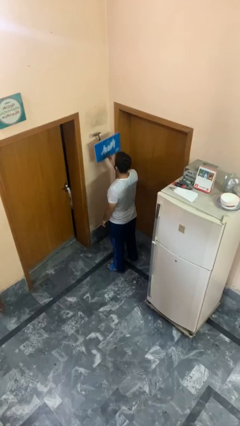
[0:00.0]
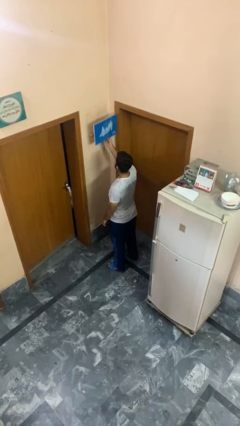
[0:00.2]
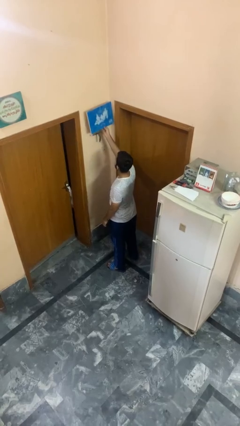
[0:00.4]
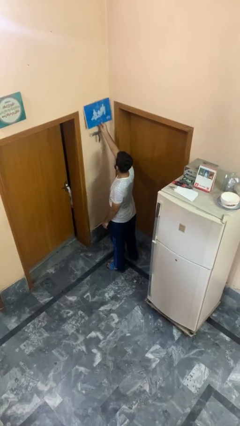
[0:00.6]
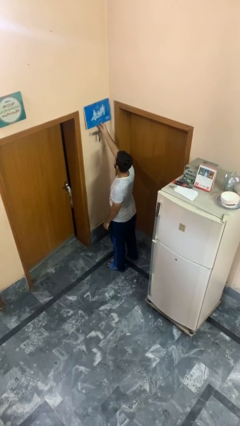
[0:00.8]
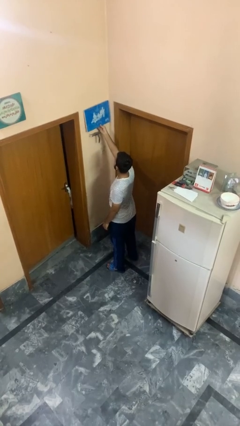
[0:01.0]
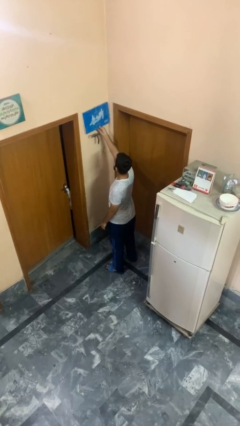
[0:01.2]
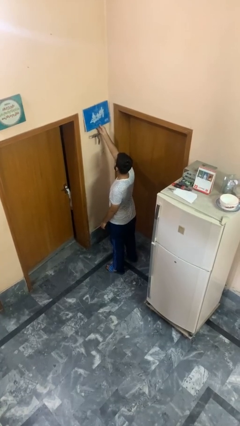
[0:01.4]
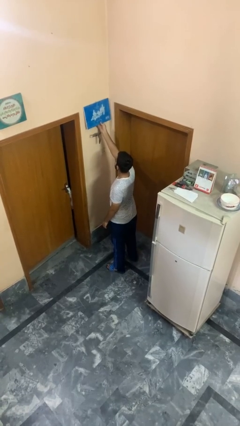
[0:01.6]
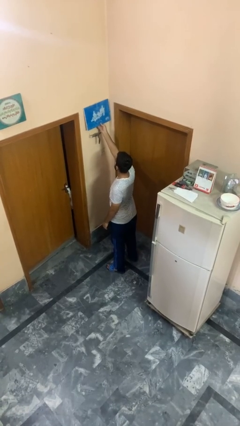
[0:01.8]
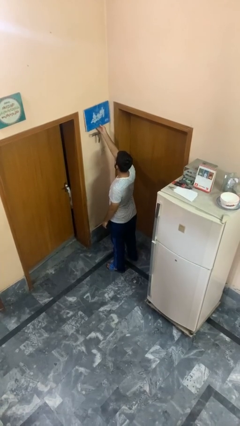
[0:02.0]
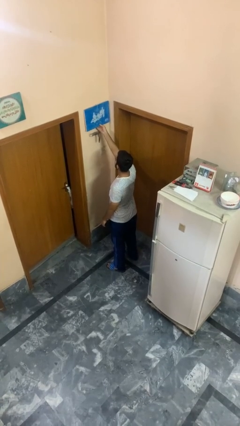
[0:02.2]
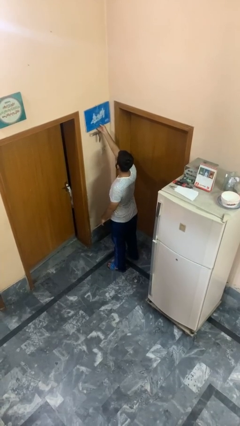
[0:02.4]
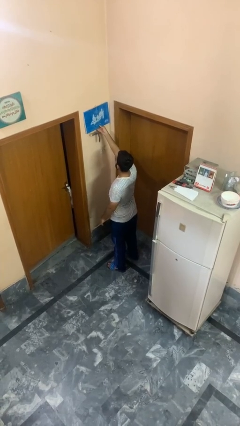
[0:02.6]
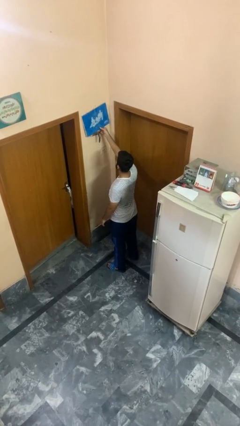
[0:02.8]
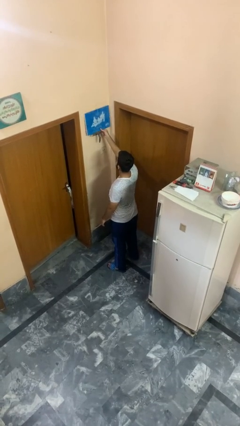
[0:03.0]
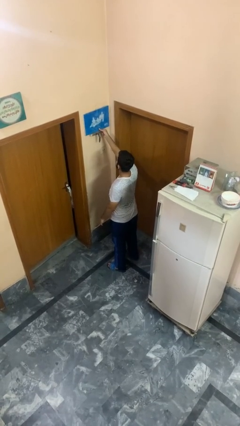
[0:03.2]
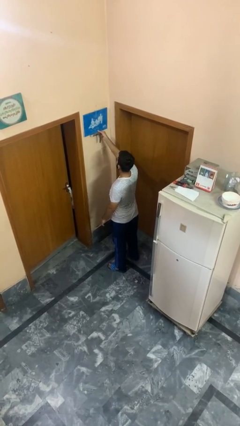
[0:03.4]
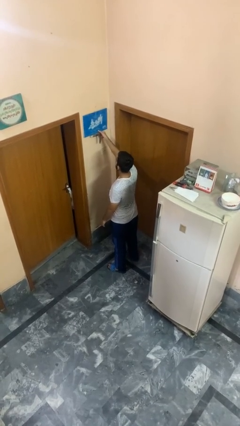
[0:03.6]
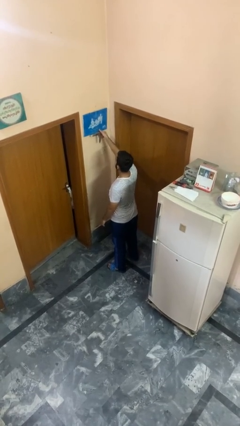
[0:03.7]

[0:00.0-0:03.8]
person puts up picture frame

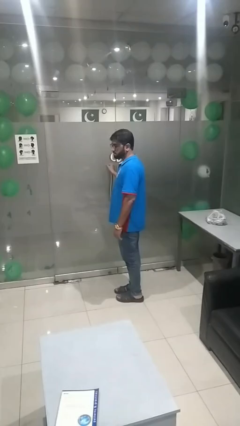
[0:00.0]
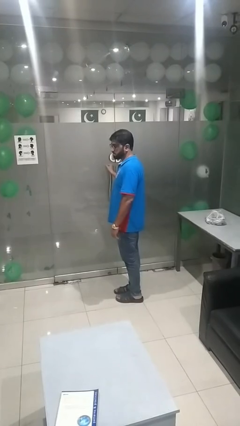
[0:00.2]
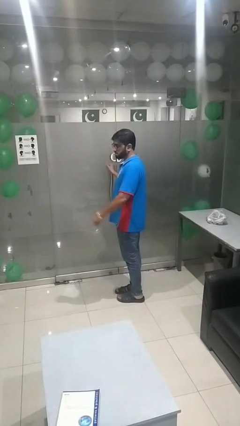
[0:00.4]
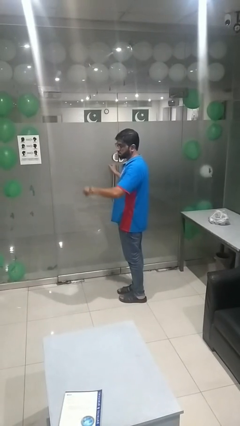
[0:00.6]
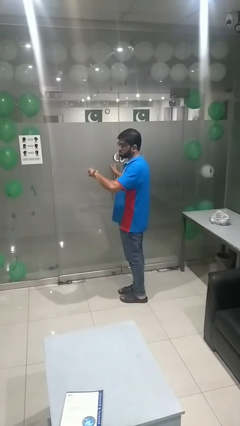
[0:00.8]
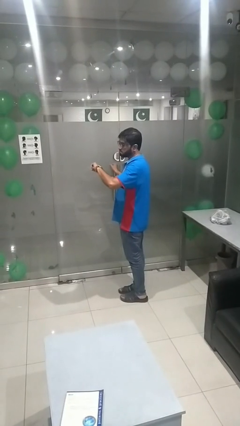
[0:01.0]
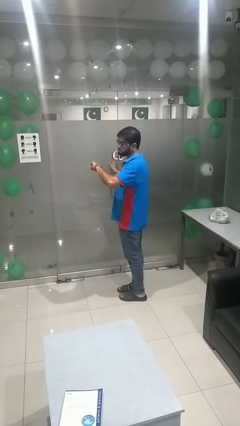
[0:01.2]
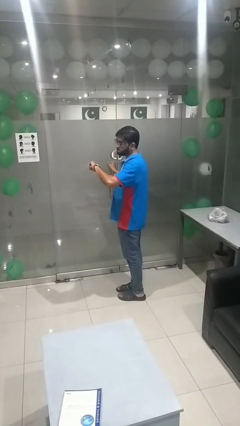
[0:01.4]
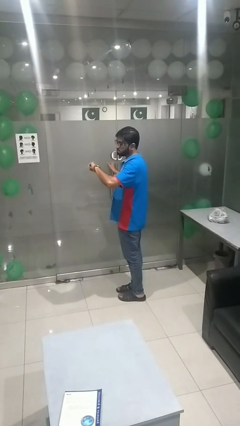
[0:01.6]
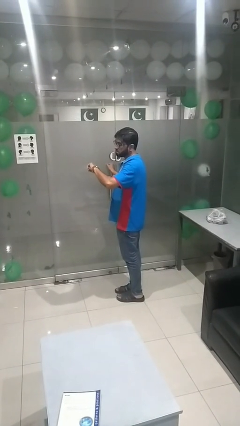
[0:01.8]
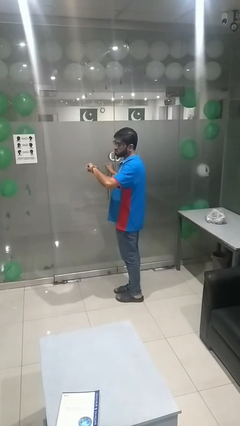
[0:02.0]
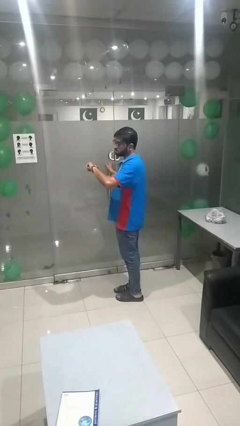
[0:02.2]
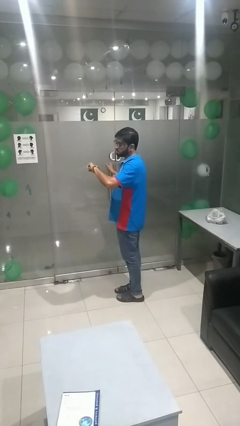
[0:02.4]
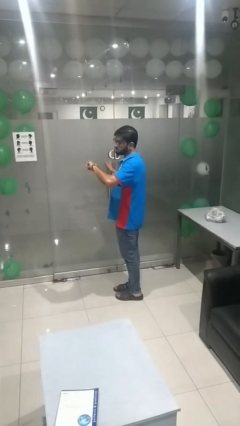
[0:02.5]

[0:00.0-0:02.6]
person looks at wristwatch

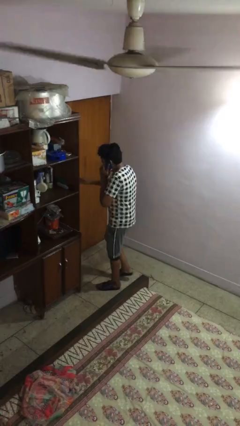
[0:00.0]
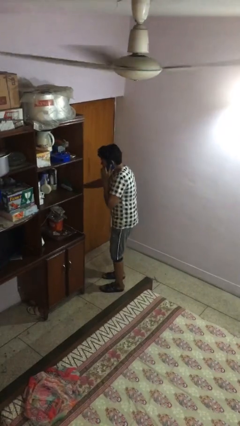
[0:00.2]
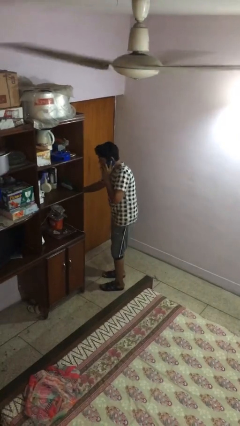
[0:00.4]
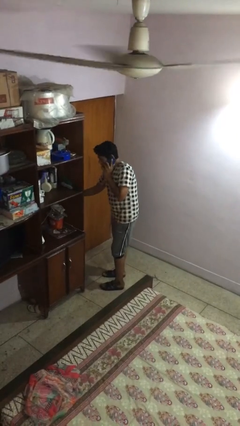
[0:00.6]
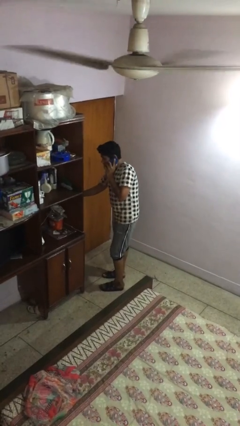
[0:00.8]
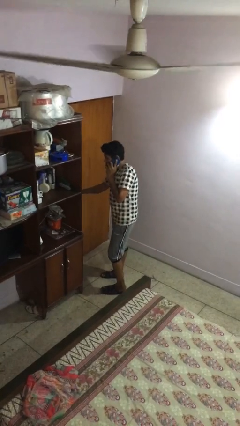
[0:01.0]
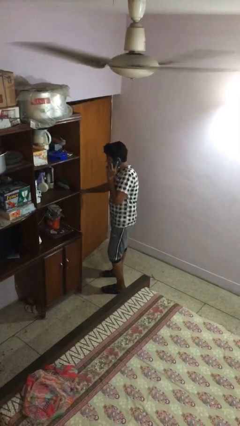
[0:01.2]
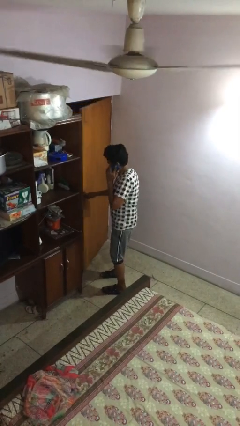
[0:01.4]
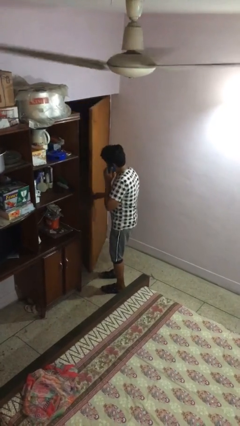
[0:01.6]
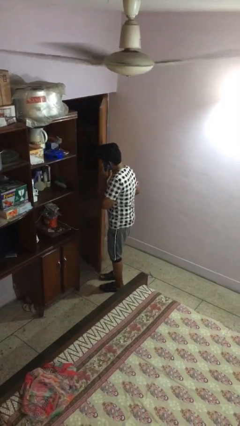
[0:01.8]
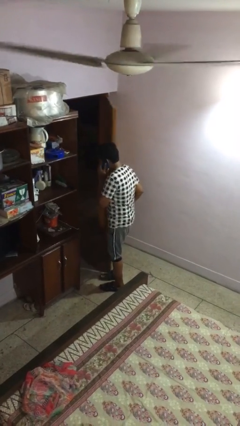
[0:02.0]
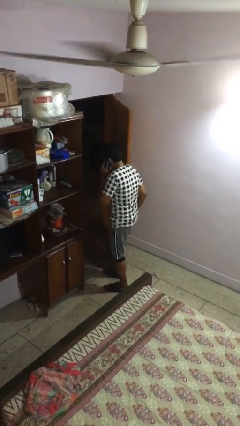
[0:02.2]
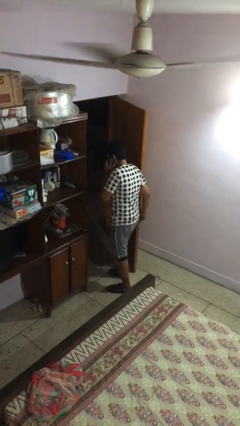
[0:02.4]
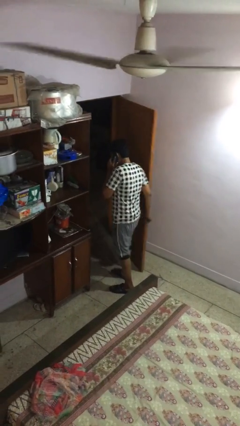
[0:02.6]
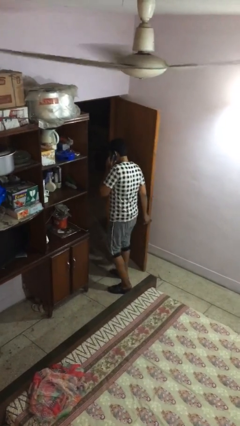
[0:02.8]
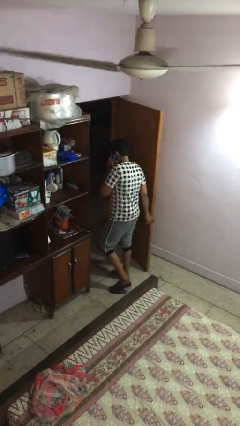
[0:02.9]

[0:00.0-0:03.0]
person opens facility door

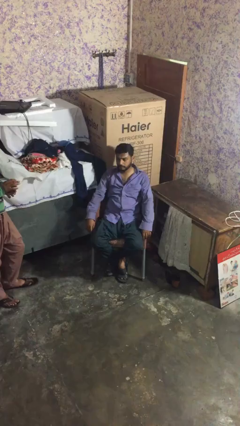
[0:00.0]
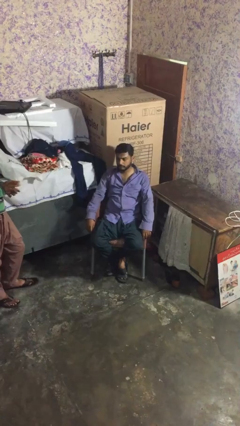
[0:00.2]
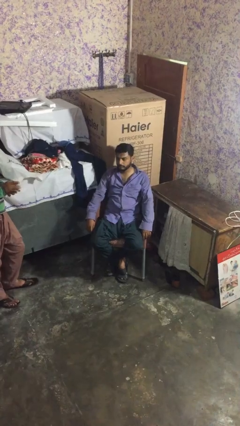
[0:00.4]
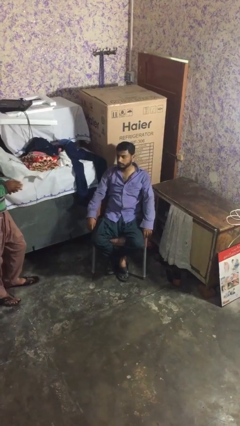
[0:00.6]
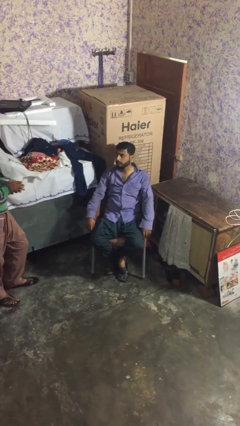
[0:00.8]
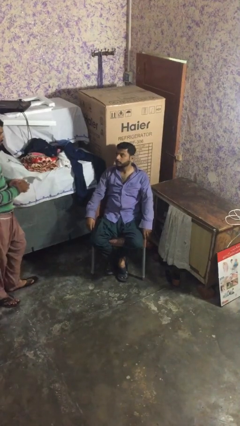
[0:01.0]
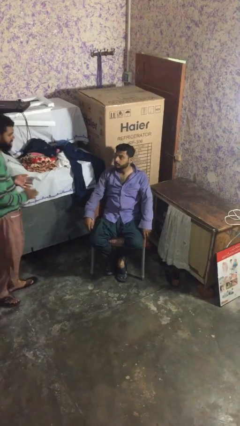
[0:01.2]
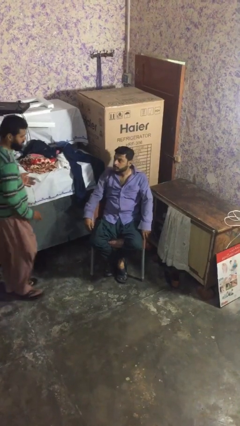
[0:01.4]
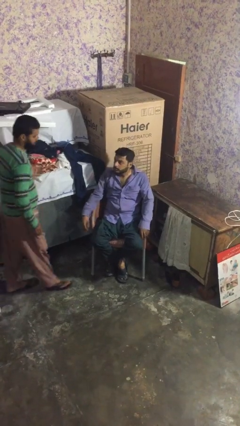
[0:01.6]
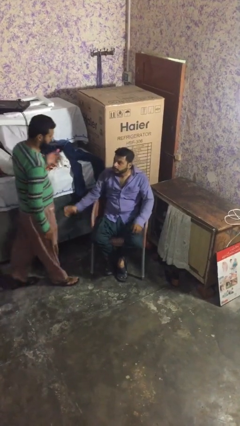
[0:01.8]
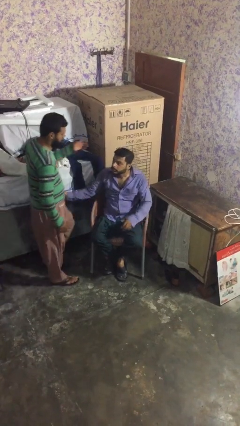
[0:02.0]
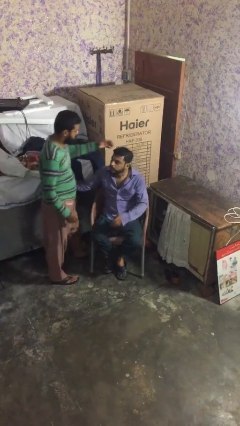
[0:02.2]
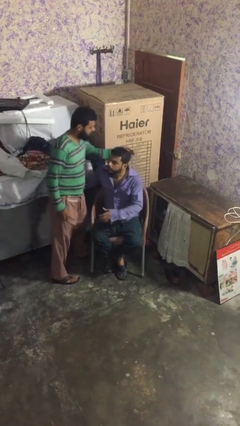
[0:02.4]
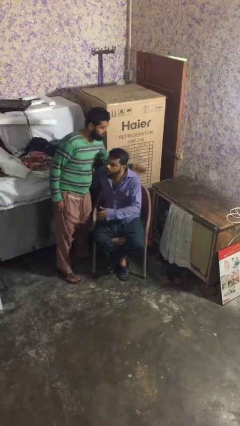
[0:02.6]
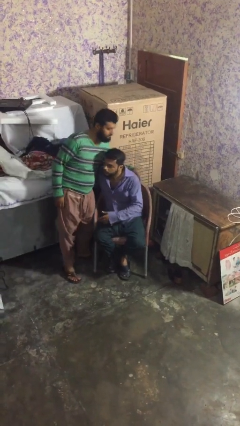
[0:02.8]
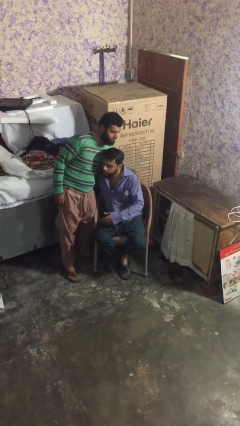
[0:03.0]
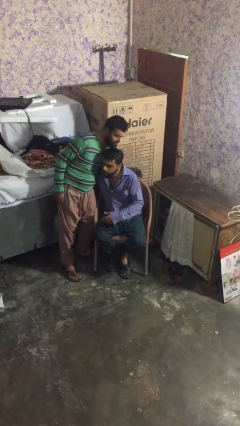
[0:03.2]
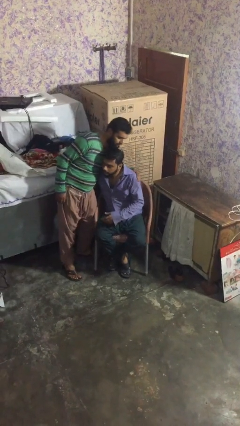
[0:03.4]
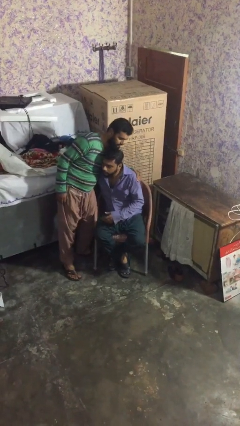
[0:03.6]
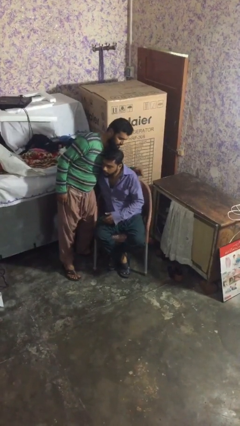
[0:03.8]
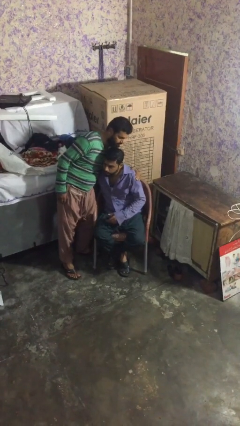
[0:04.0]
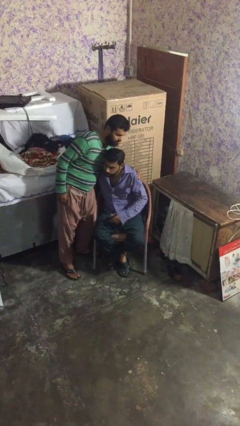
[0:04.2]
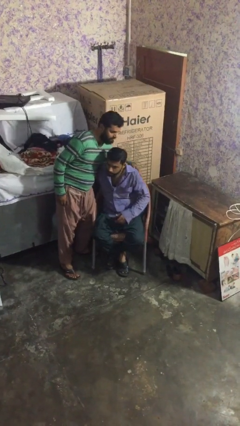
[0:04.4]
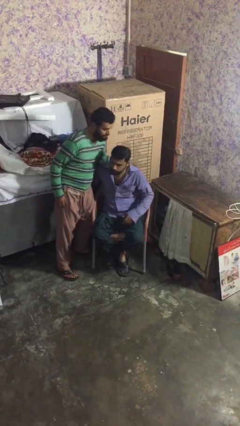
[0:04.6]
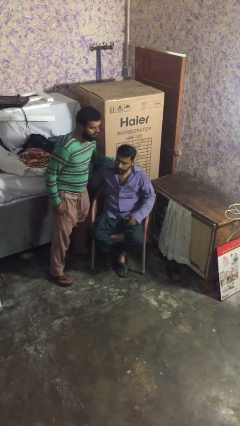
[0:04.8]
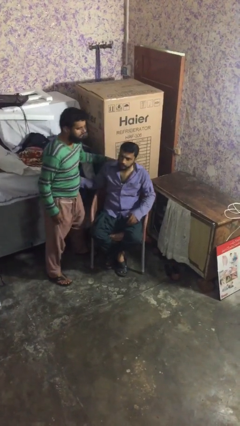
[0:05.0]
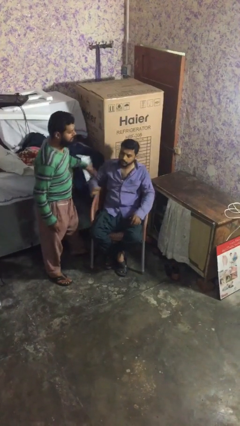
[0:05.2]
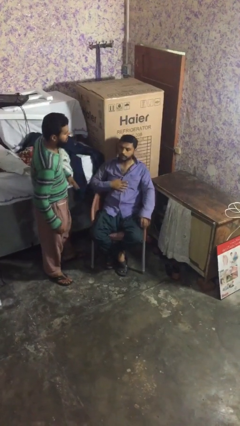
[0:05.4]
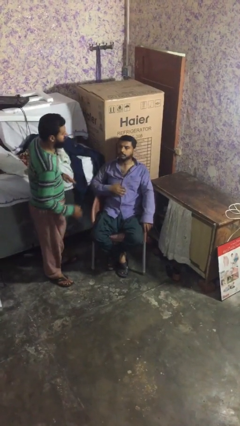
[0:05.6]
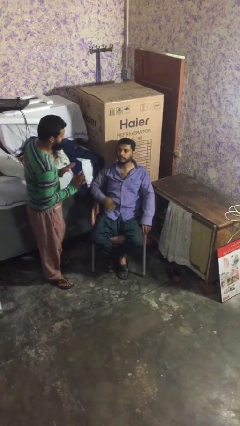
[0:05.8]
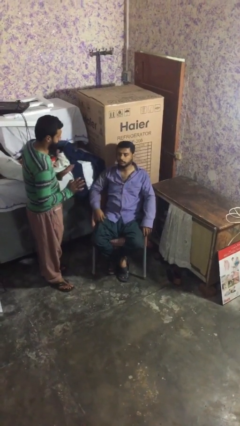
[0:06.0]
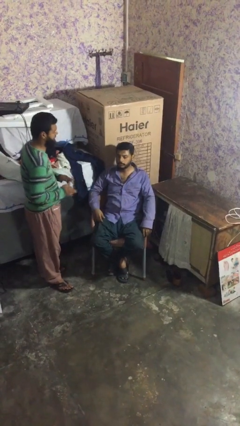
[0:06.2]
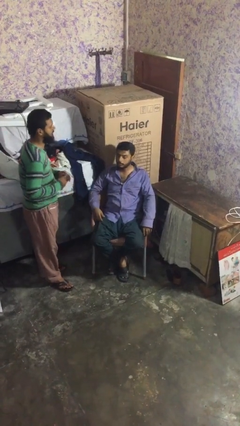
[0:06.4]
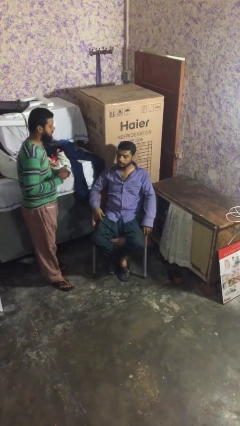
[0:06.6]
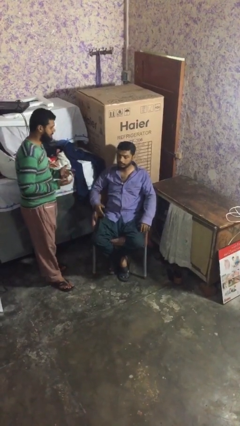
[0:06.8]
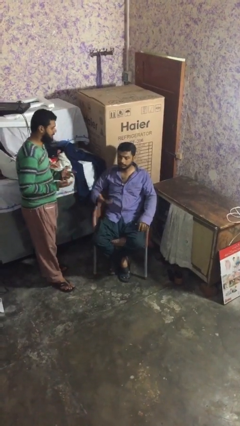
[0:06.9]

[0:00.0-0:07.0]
person embraces person

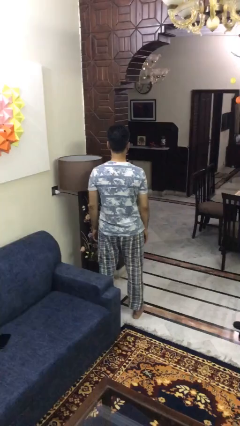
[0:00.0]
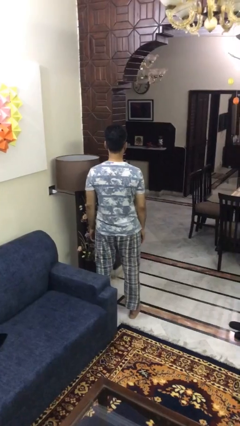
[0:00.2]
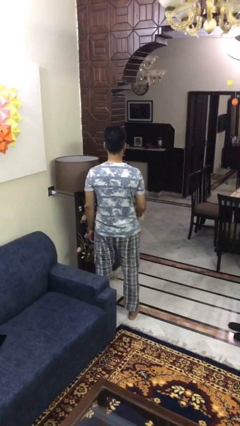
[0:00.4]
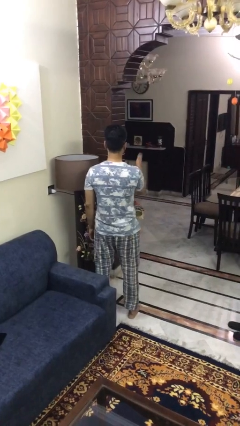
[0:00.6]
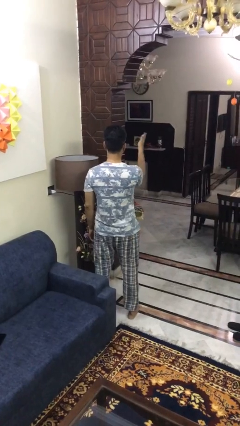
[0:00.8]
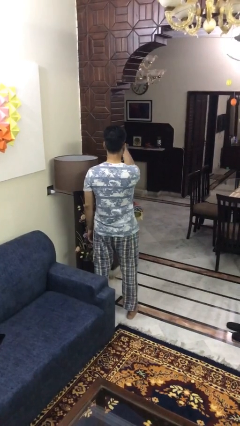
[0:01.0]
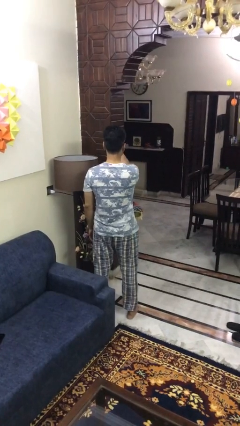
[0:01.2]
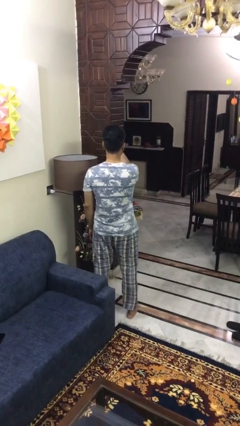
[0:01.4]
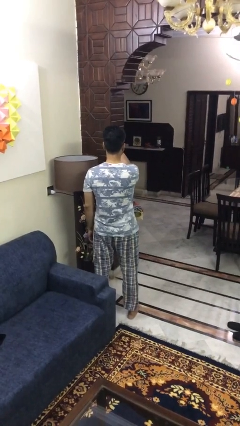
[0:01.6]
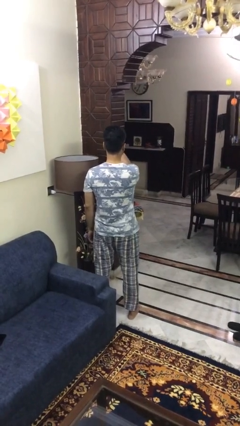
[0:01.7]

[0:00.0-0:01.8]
person gestures swipe left
